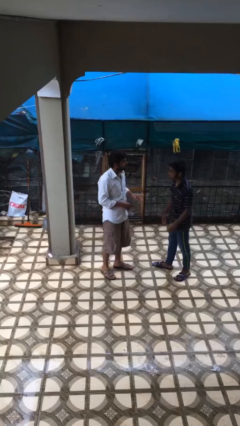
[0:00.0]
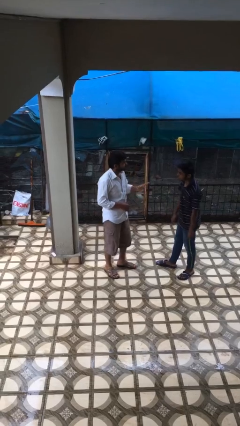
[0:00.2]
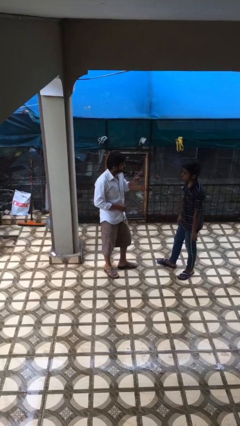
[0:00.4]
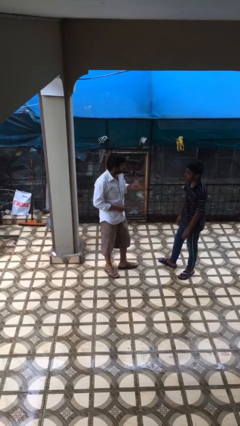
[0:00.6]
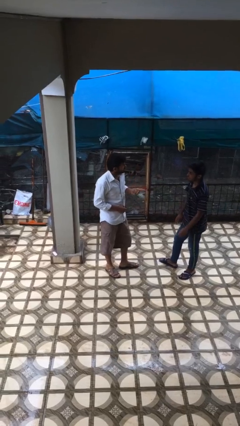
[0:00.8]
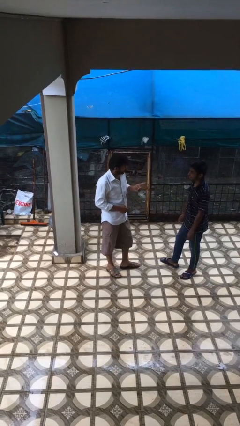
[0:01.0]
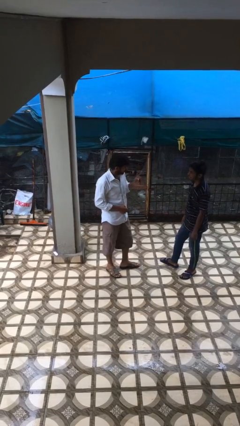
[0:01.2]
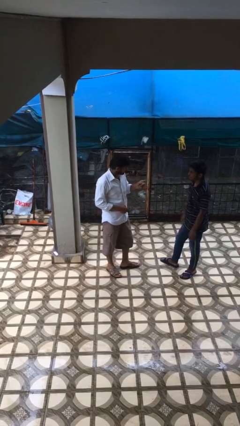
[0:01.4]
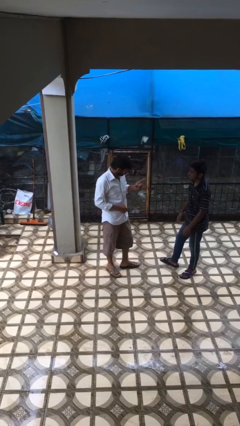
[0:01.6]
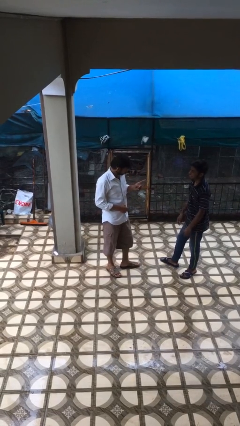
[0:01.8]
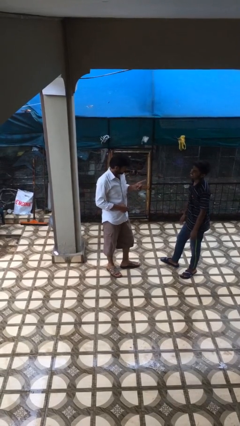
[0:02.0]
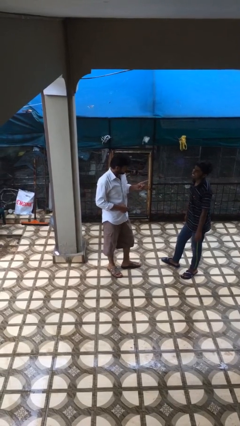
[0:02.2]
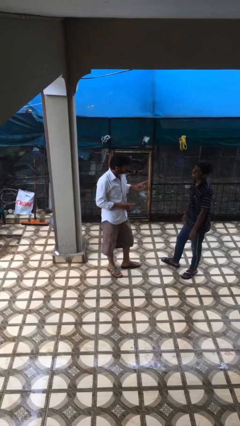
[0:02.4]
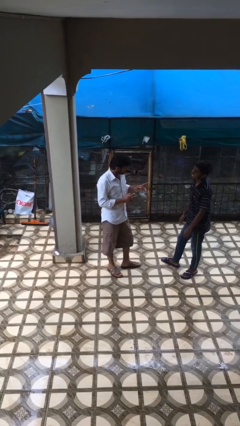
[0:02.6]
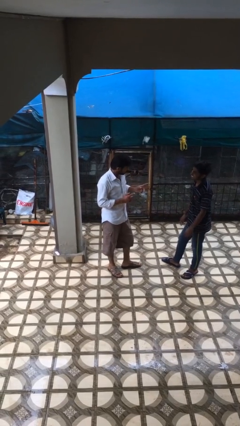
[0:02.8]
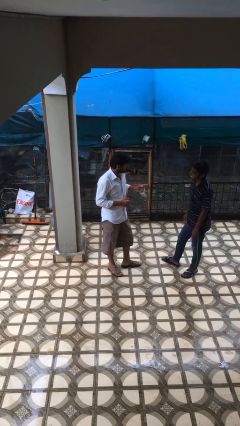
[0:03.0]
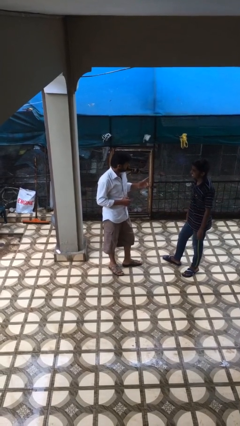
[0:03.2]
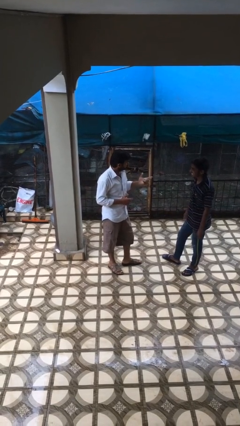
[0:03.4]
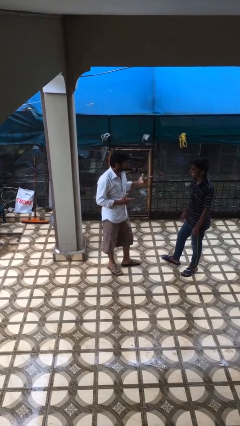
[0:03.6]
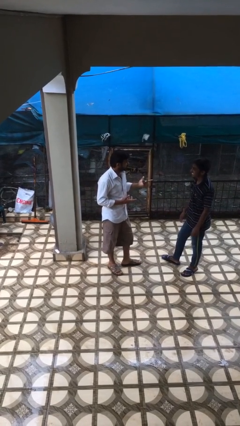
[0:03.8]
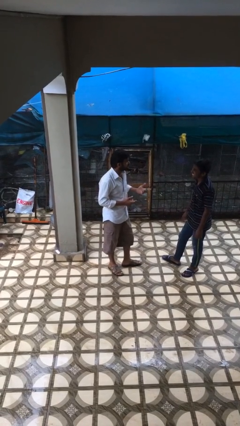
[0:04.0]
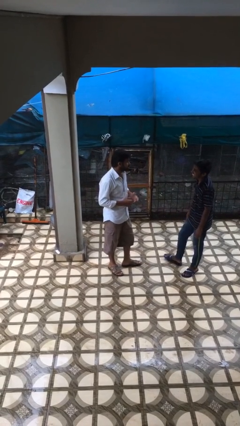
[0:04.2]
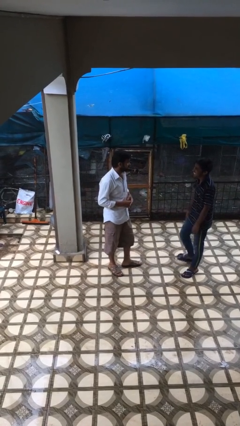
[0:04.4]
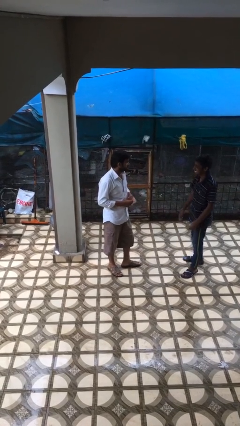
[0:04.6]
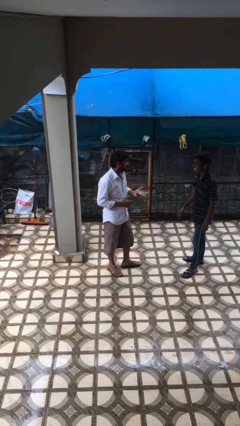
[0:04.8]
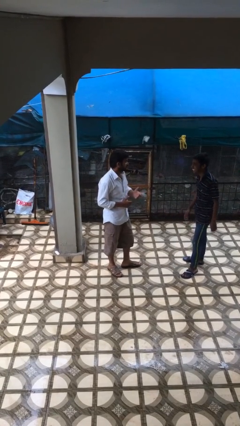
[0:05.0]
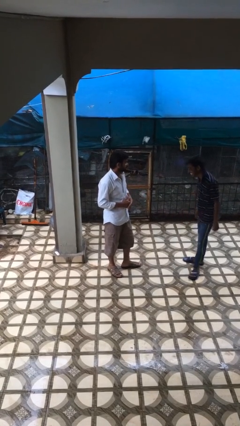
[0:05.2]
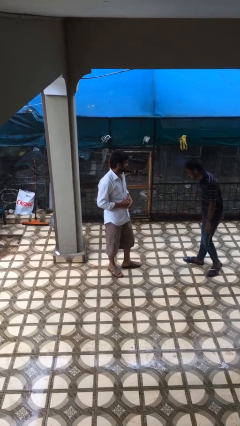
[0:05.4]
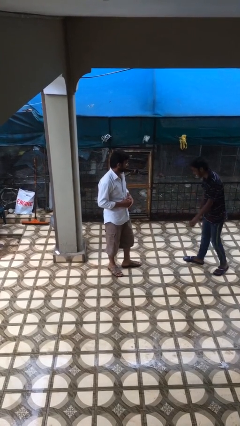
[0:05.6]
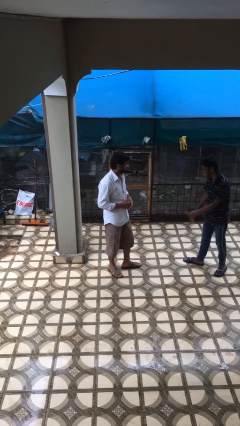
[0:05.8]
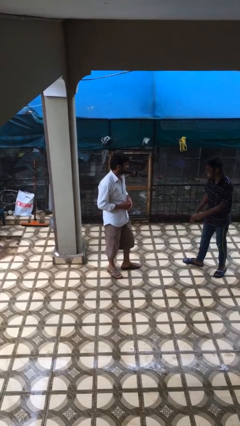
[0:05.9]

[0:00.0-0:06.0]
person talks to person

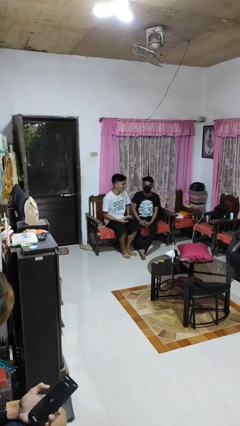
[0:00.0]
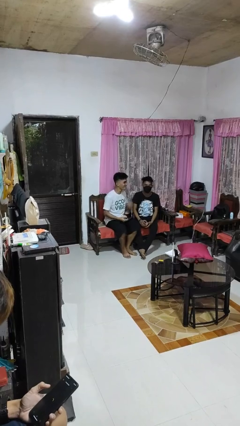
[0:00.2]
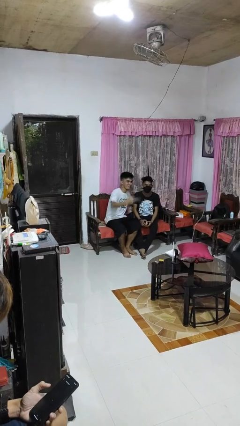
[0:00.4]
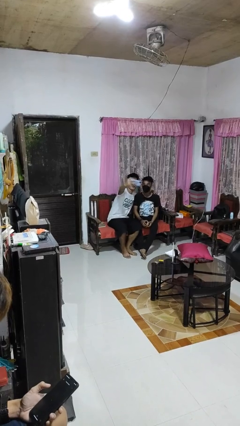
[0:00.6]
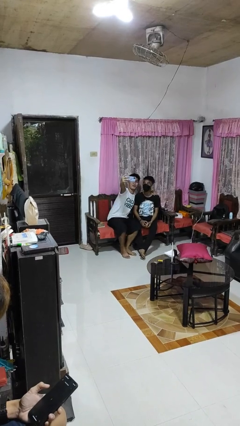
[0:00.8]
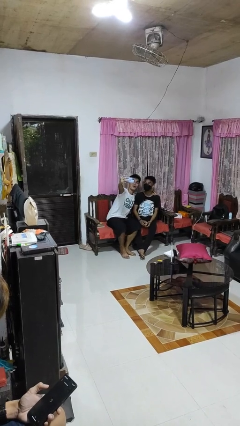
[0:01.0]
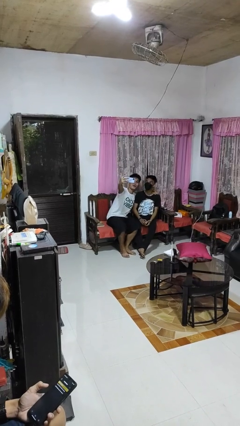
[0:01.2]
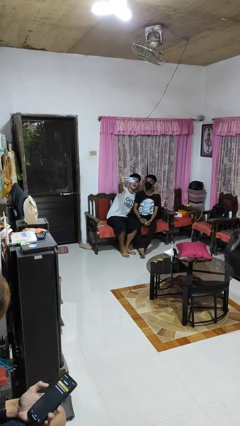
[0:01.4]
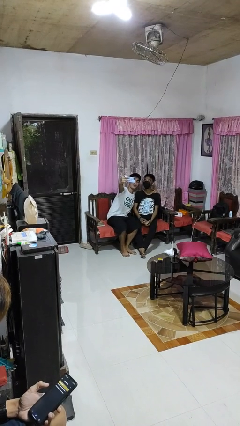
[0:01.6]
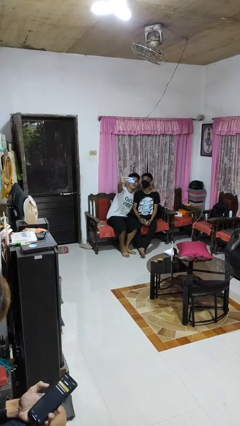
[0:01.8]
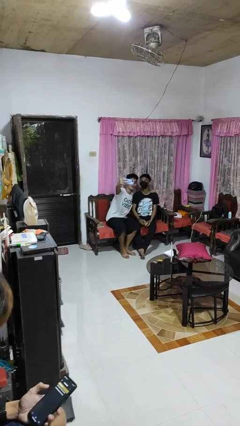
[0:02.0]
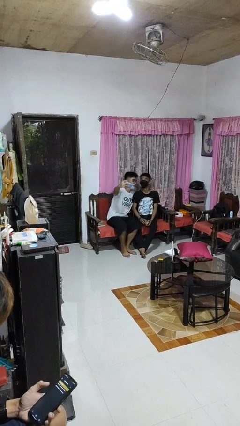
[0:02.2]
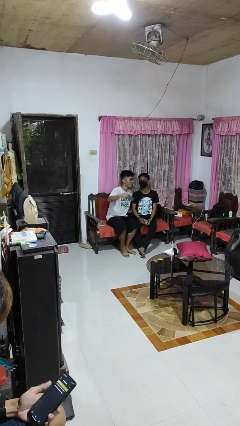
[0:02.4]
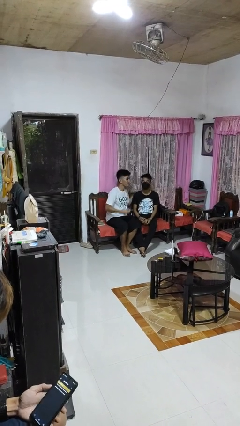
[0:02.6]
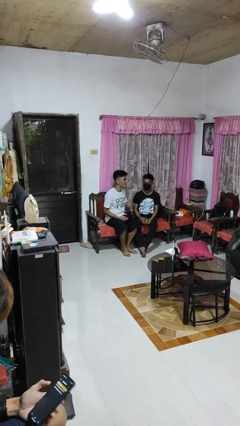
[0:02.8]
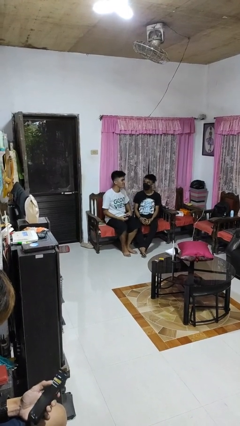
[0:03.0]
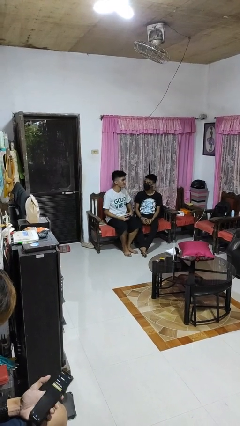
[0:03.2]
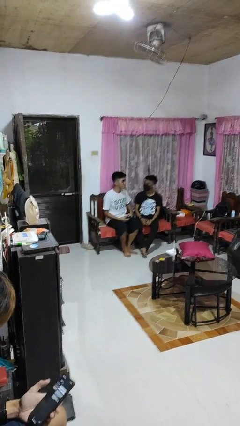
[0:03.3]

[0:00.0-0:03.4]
person takes selfie with person

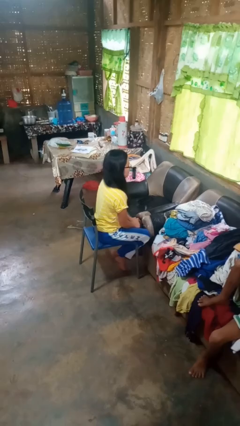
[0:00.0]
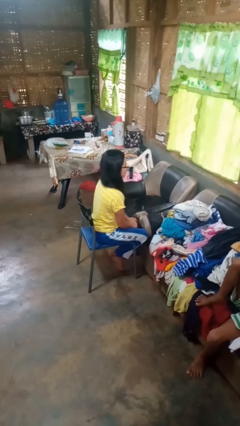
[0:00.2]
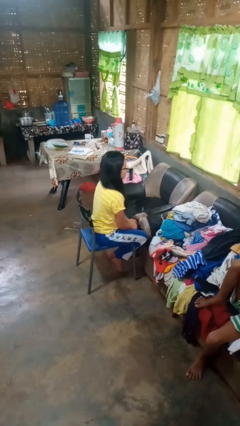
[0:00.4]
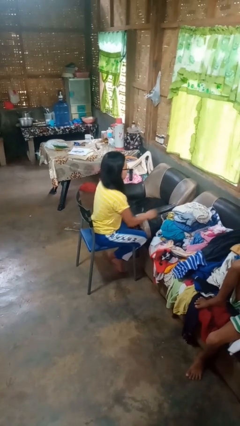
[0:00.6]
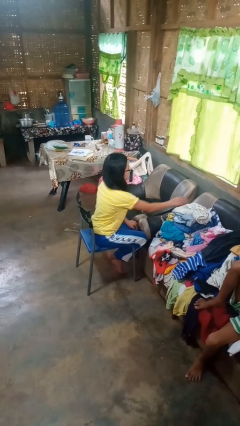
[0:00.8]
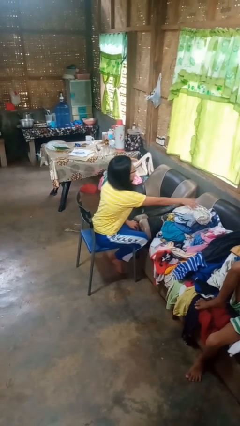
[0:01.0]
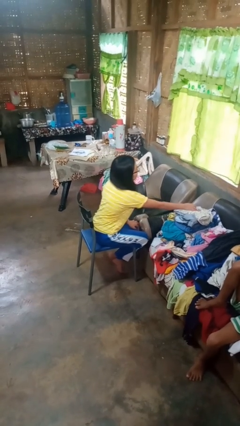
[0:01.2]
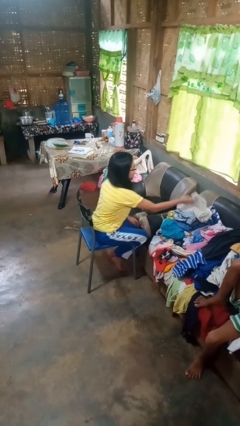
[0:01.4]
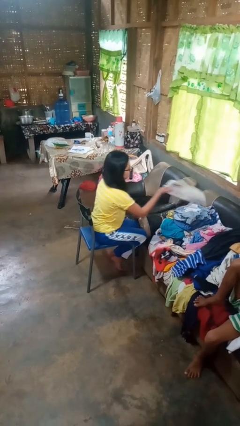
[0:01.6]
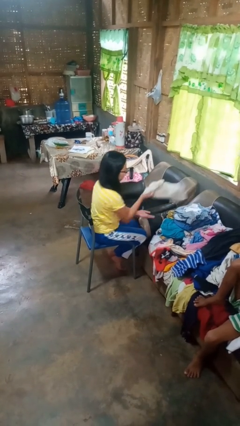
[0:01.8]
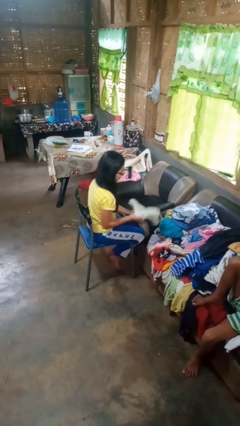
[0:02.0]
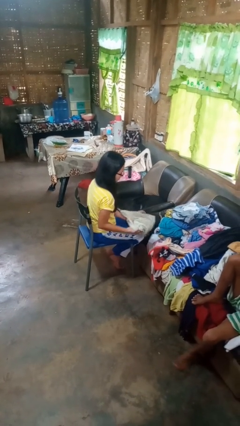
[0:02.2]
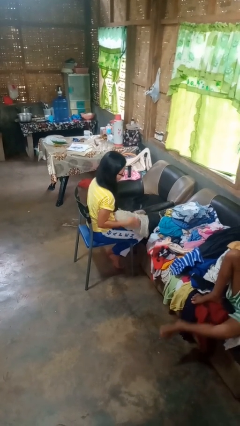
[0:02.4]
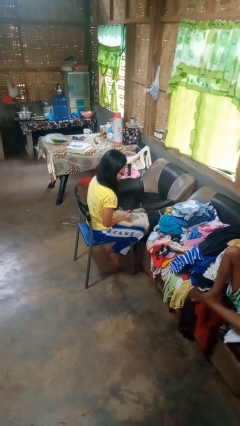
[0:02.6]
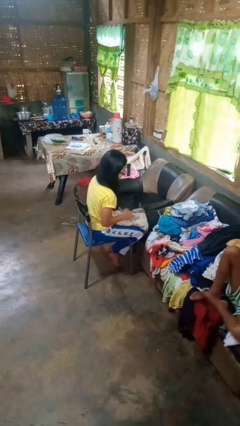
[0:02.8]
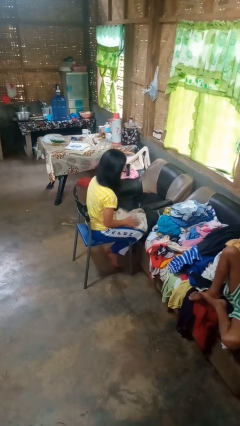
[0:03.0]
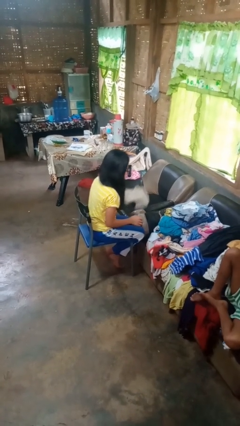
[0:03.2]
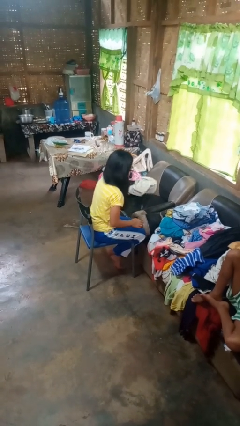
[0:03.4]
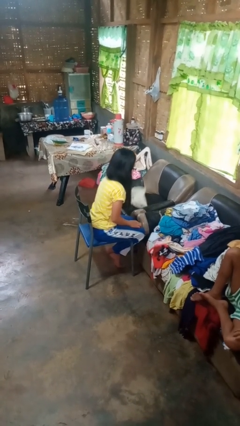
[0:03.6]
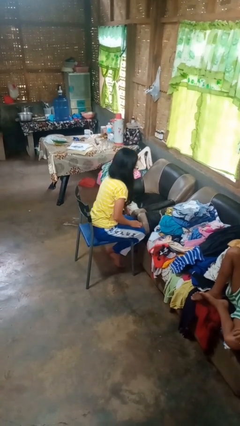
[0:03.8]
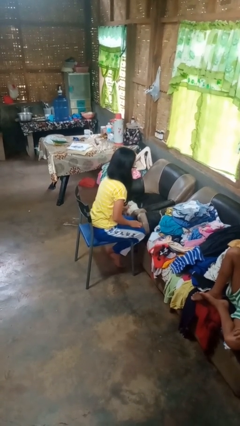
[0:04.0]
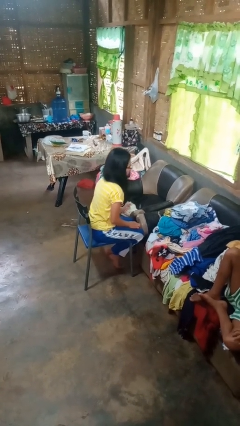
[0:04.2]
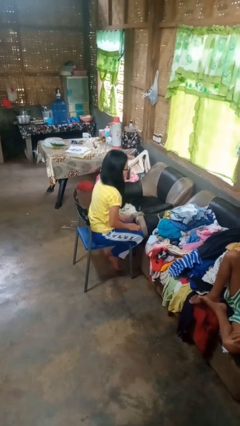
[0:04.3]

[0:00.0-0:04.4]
person folds pants

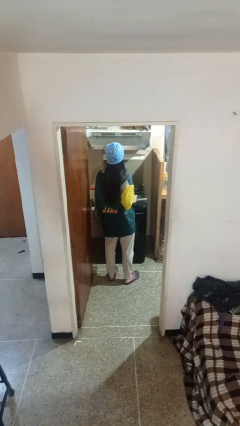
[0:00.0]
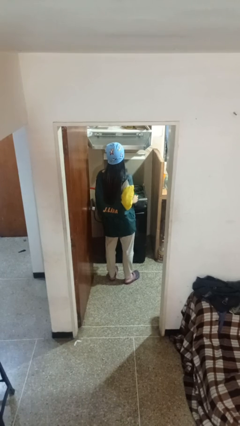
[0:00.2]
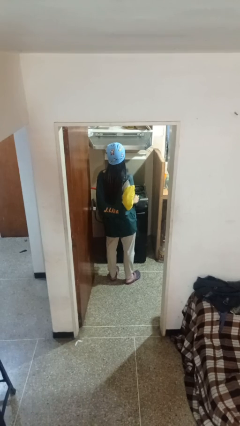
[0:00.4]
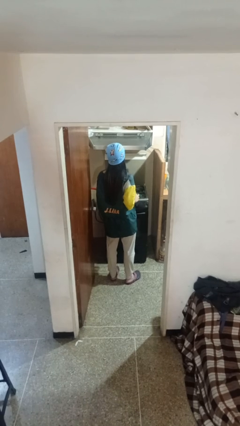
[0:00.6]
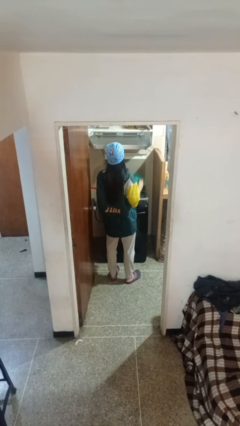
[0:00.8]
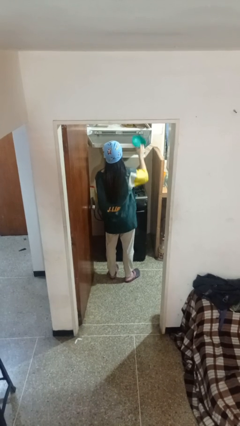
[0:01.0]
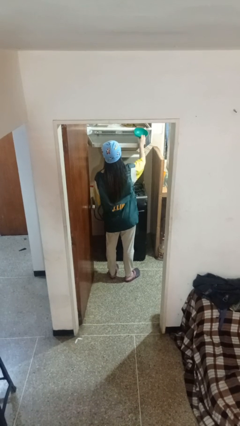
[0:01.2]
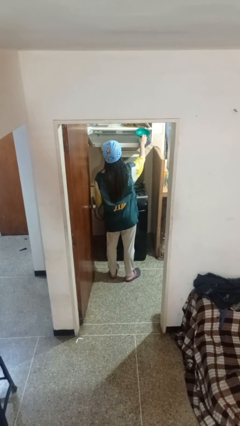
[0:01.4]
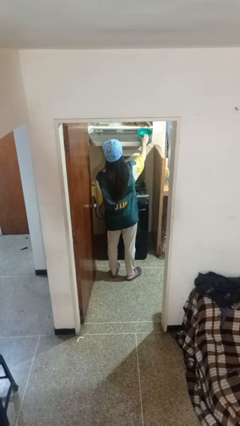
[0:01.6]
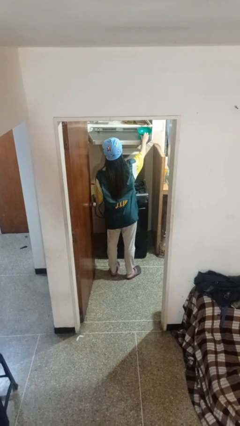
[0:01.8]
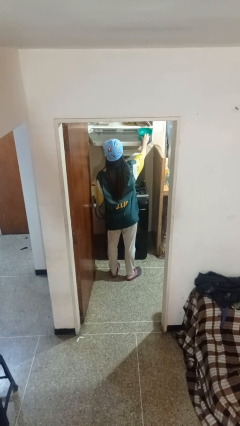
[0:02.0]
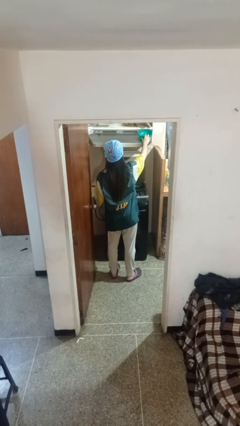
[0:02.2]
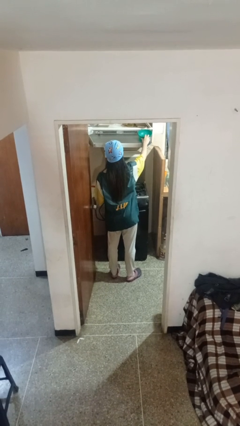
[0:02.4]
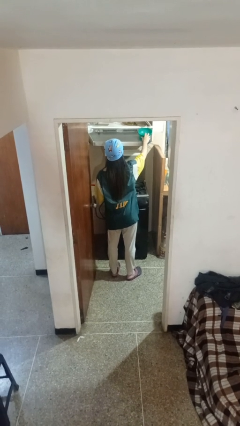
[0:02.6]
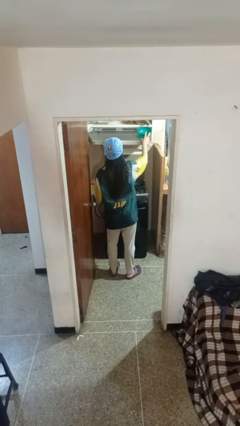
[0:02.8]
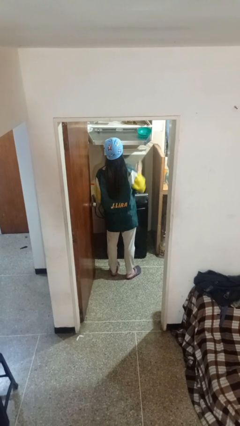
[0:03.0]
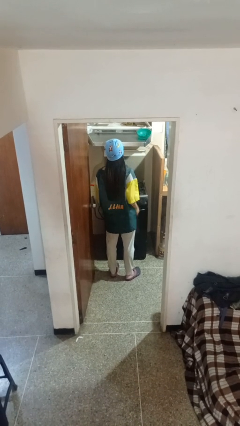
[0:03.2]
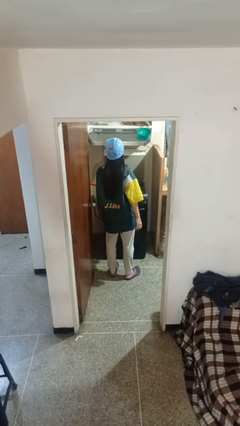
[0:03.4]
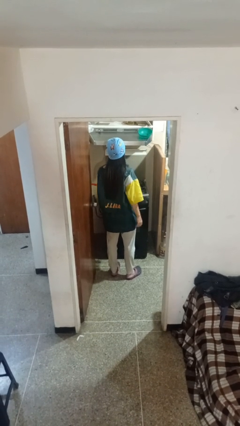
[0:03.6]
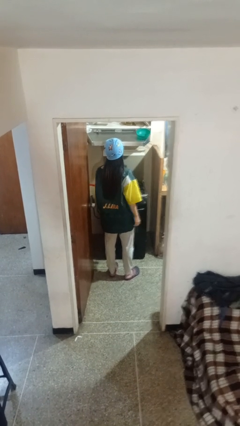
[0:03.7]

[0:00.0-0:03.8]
person puts down object on countertop

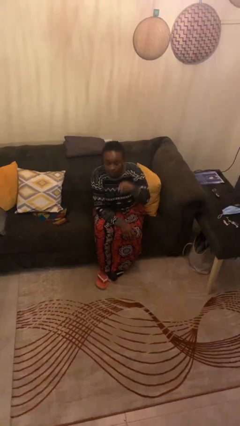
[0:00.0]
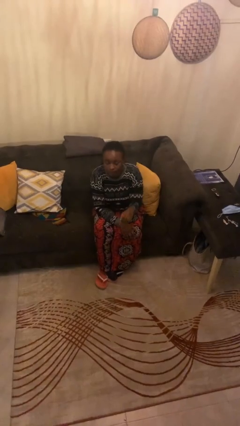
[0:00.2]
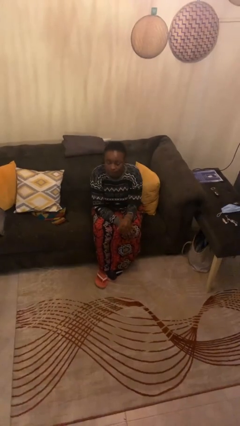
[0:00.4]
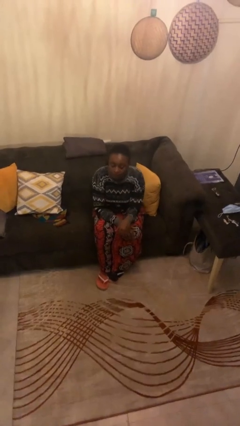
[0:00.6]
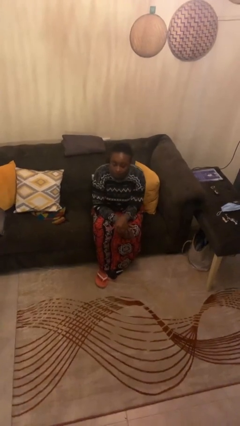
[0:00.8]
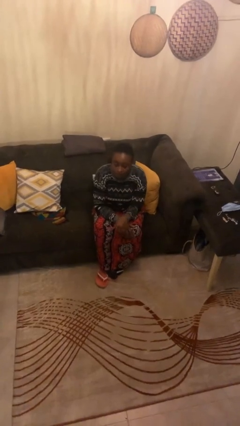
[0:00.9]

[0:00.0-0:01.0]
person gestures lower hand
